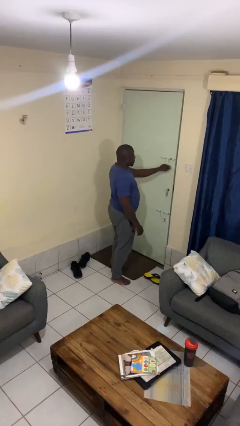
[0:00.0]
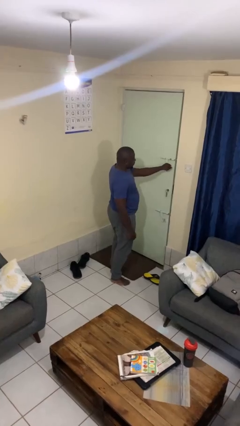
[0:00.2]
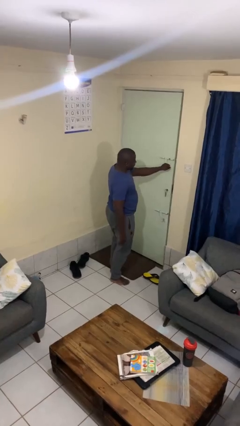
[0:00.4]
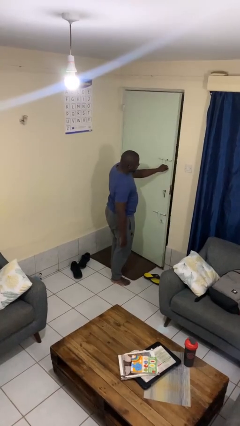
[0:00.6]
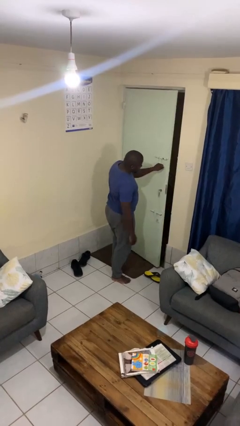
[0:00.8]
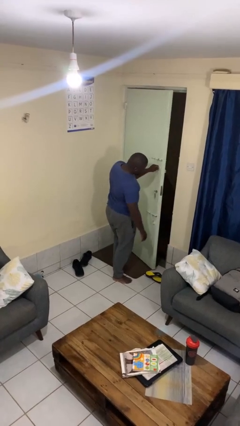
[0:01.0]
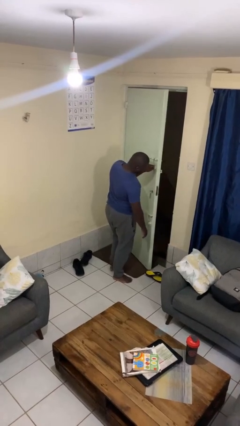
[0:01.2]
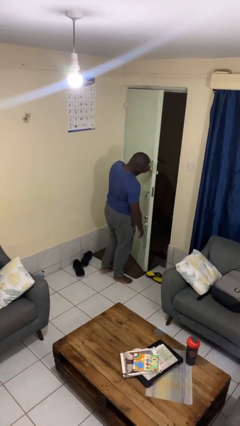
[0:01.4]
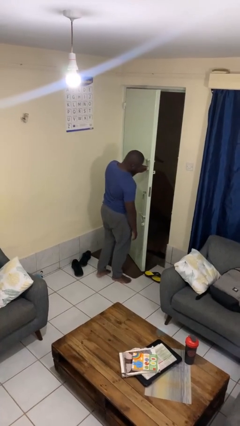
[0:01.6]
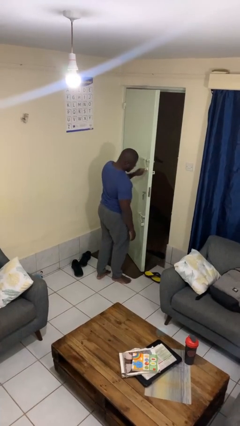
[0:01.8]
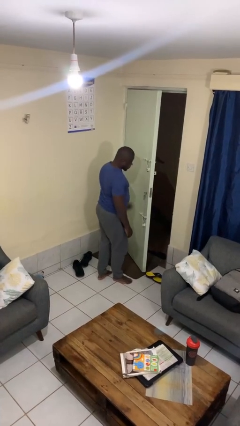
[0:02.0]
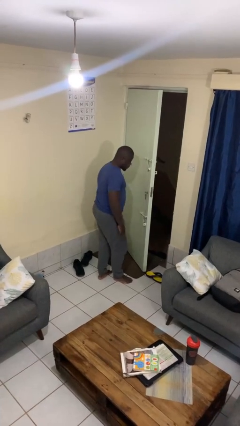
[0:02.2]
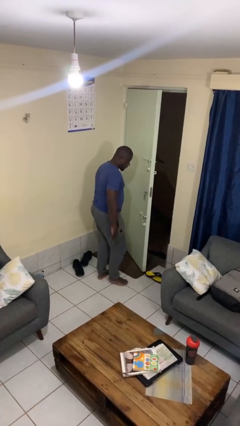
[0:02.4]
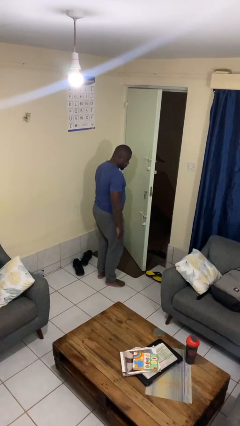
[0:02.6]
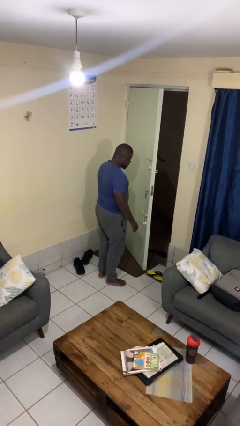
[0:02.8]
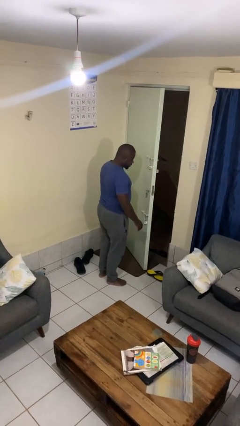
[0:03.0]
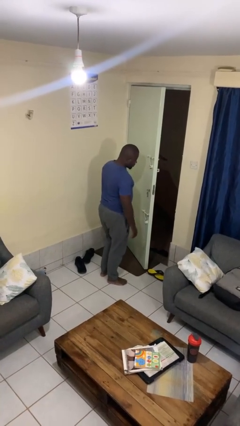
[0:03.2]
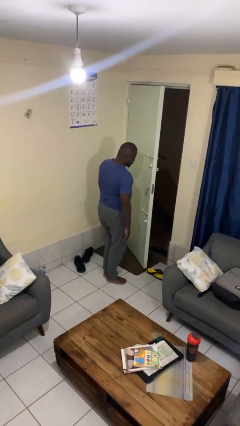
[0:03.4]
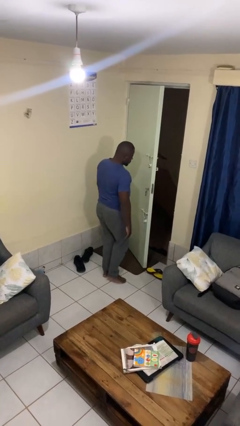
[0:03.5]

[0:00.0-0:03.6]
person opens facility door

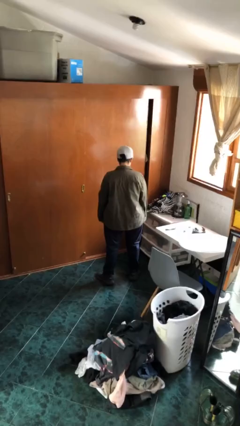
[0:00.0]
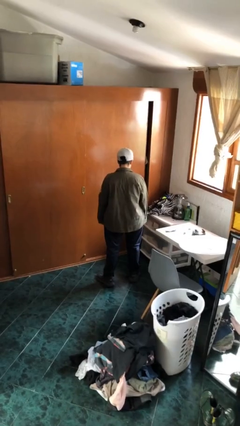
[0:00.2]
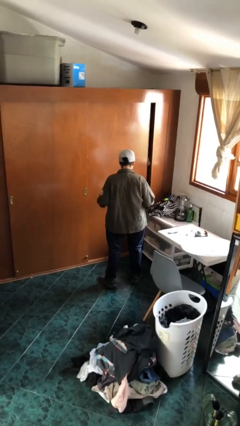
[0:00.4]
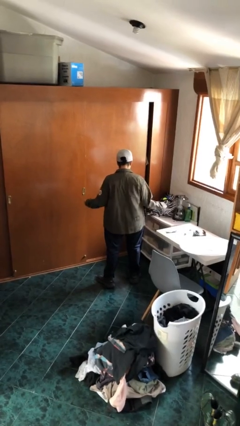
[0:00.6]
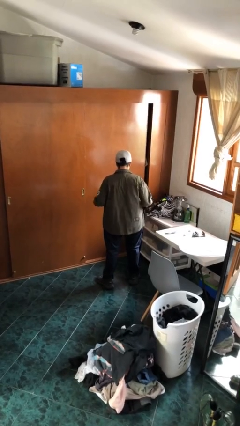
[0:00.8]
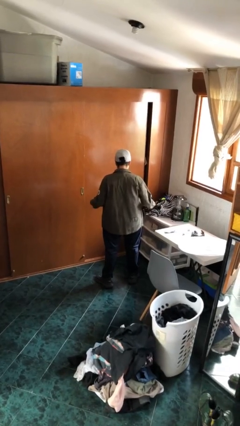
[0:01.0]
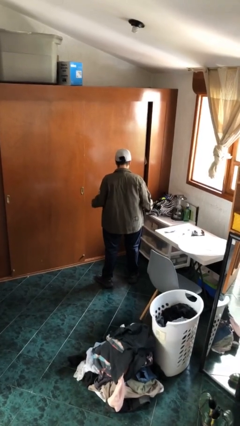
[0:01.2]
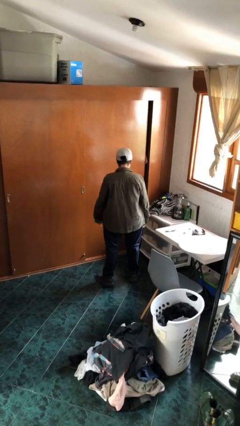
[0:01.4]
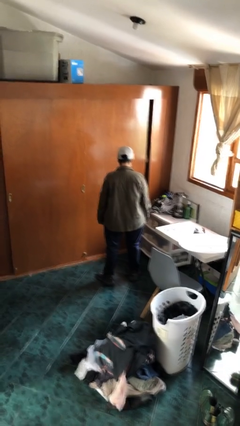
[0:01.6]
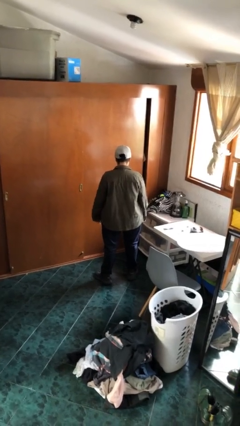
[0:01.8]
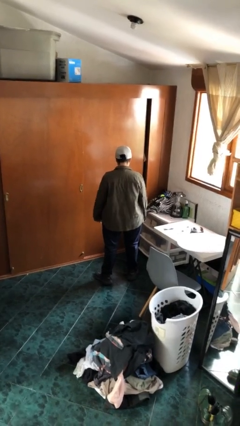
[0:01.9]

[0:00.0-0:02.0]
person snaps fingers

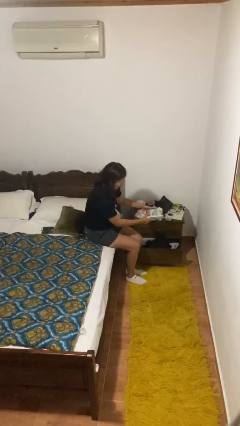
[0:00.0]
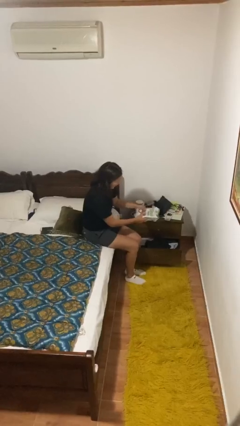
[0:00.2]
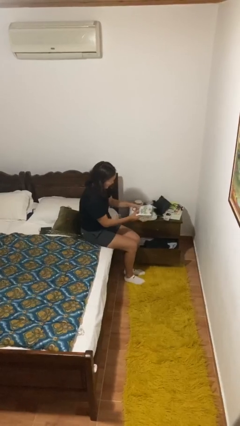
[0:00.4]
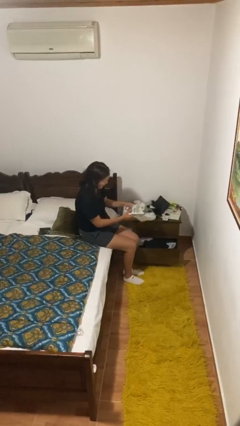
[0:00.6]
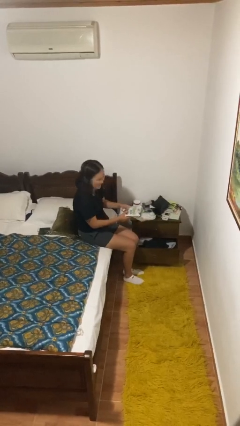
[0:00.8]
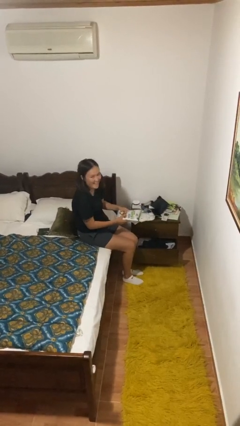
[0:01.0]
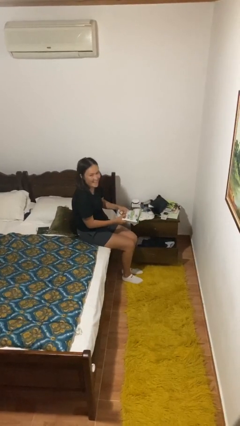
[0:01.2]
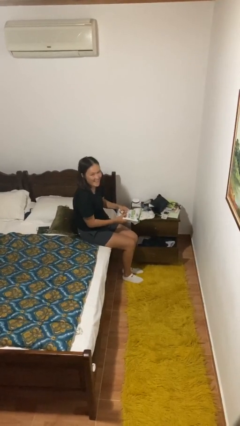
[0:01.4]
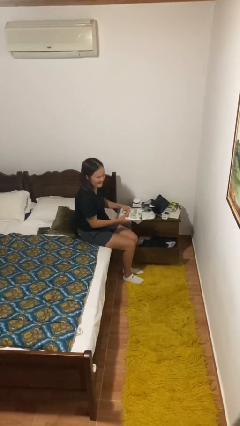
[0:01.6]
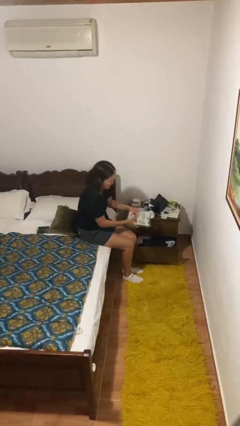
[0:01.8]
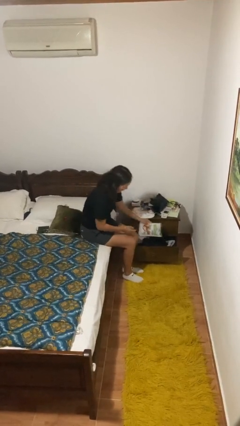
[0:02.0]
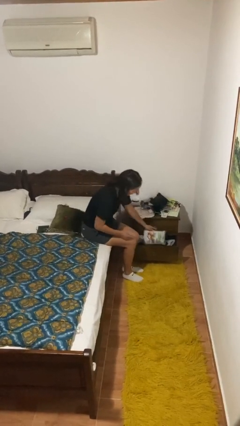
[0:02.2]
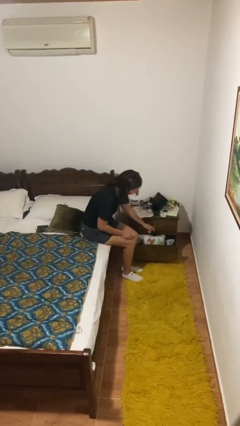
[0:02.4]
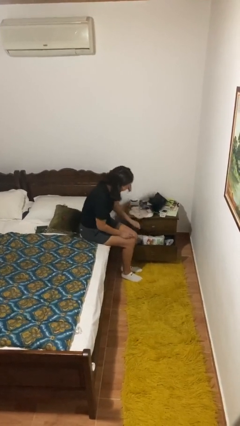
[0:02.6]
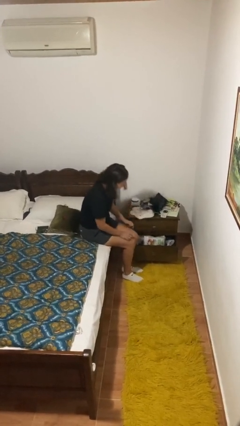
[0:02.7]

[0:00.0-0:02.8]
person puts down object into cabinet

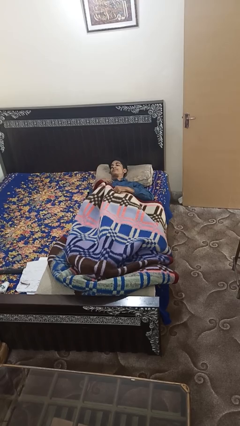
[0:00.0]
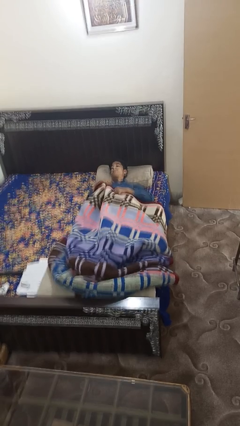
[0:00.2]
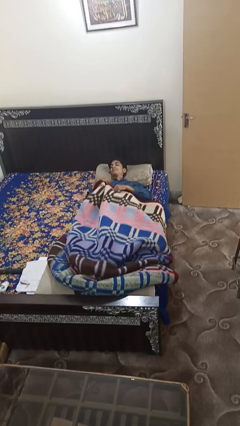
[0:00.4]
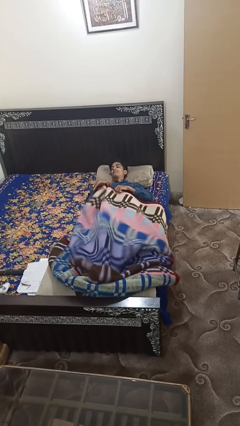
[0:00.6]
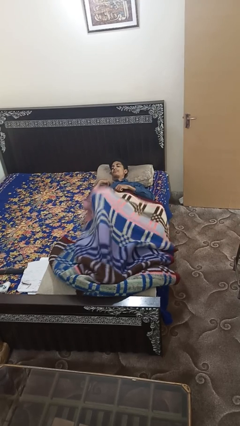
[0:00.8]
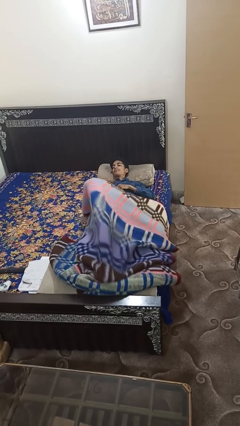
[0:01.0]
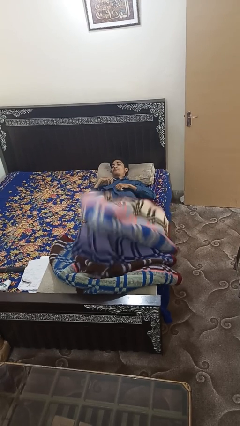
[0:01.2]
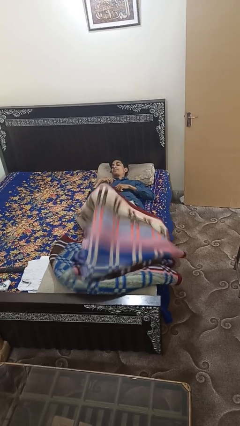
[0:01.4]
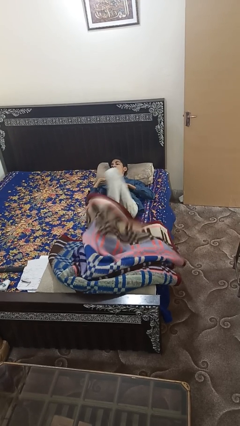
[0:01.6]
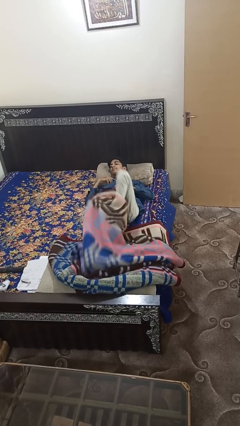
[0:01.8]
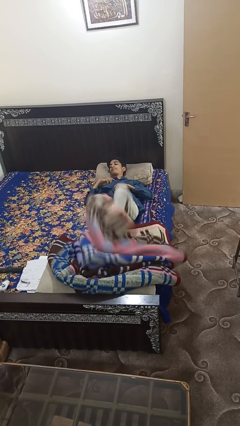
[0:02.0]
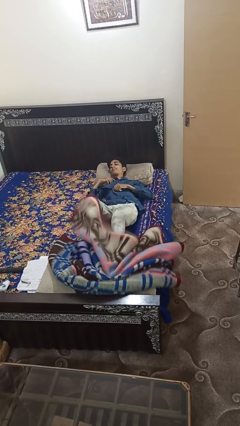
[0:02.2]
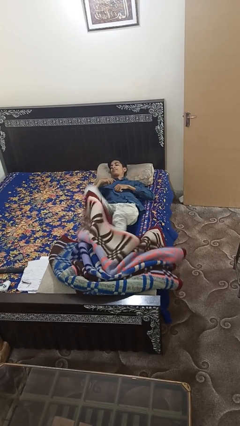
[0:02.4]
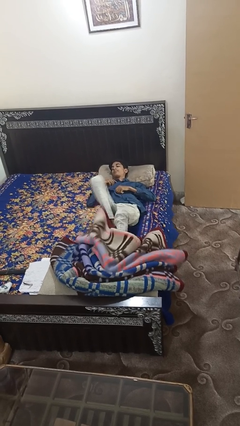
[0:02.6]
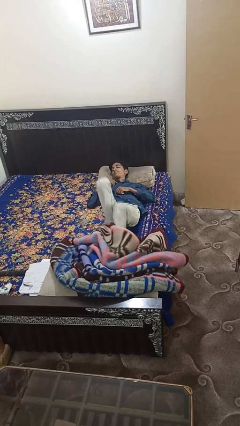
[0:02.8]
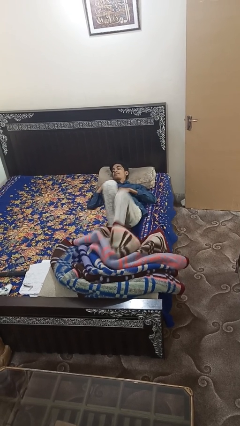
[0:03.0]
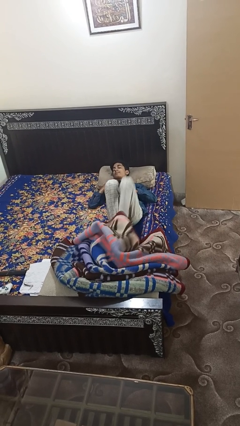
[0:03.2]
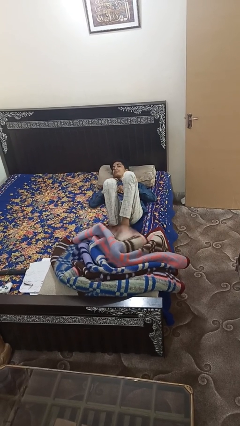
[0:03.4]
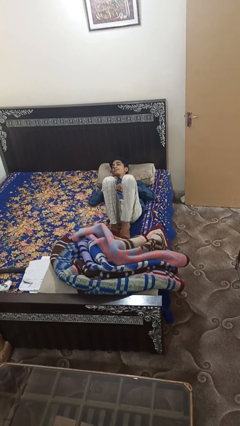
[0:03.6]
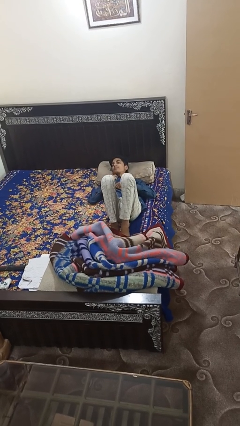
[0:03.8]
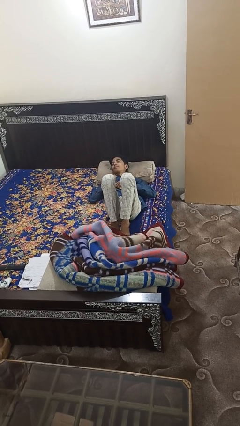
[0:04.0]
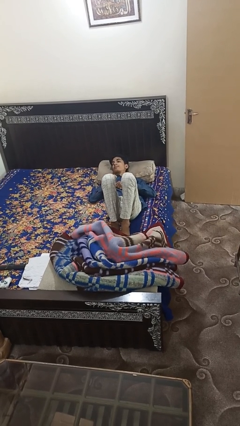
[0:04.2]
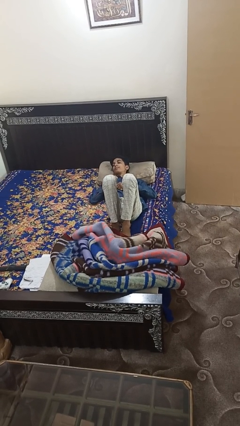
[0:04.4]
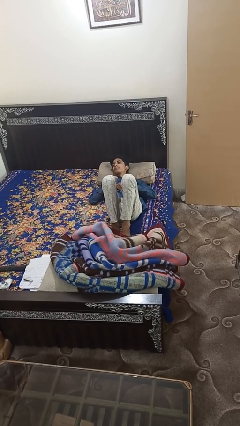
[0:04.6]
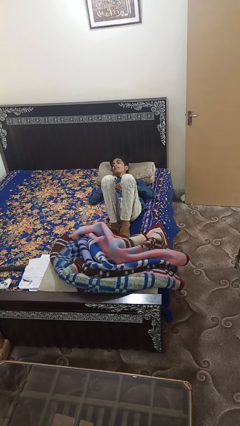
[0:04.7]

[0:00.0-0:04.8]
person uncovers with bedsheets

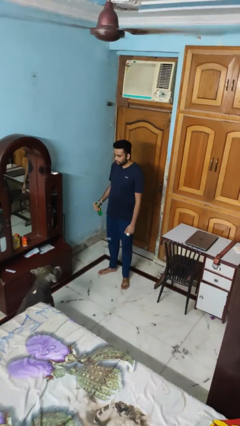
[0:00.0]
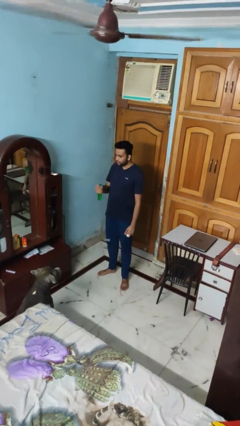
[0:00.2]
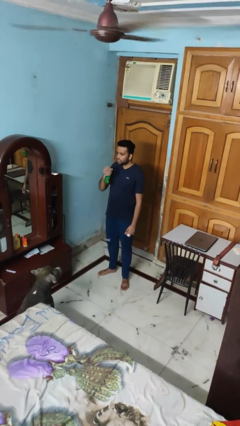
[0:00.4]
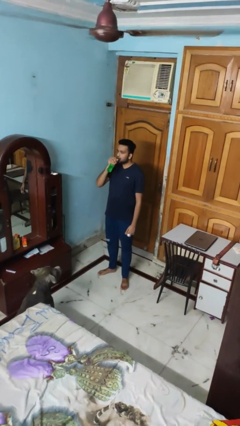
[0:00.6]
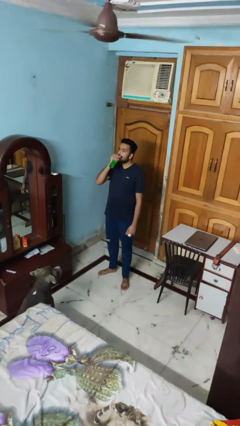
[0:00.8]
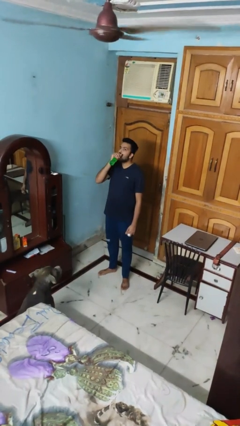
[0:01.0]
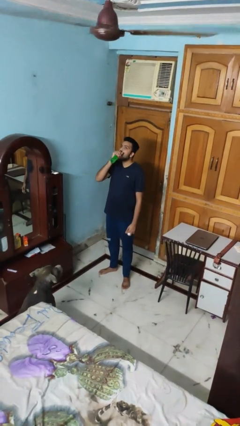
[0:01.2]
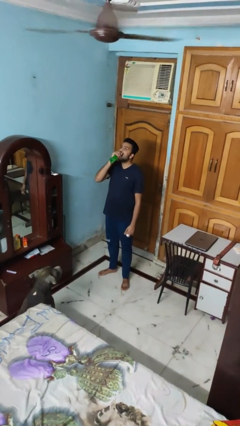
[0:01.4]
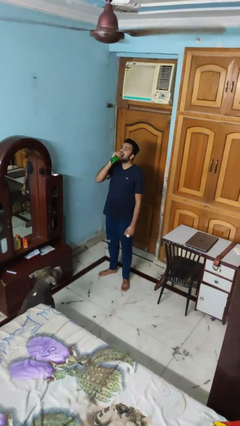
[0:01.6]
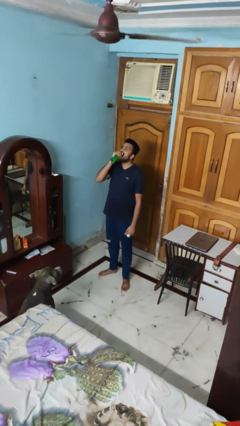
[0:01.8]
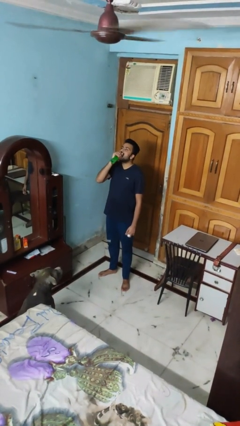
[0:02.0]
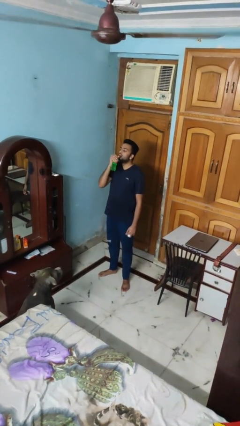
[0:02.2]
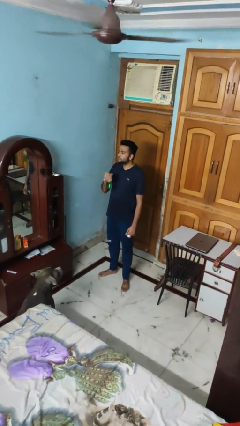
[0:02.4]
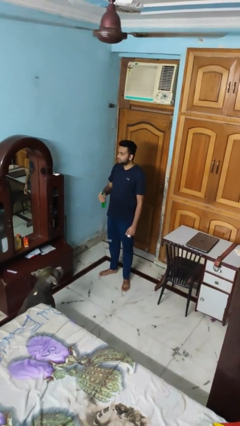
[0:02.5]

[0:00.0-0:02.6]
person drinks from bottle

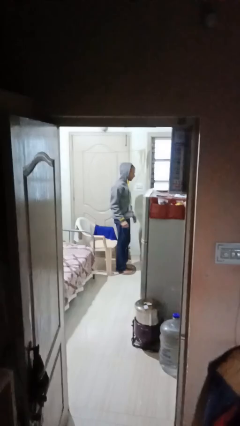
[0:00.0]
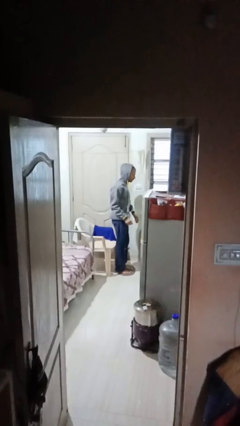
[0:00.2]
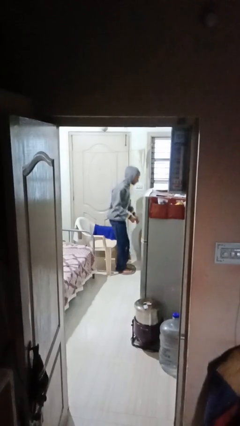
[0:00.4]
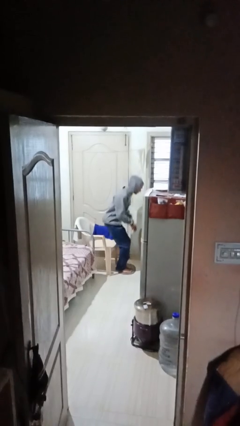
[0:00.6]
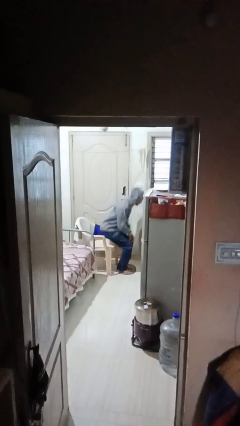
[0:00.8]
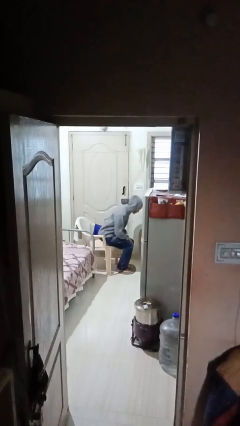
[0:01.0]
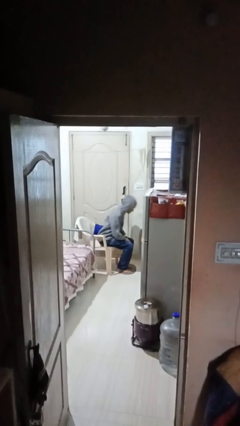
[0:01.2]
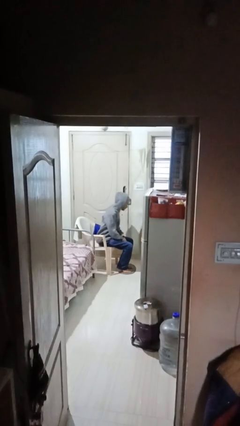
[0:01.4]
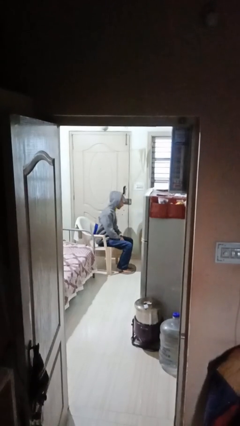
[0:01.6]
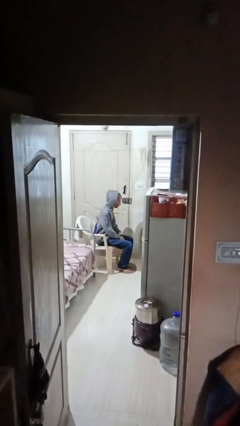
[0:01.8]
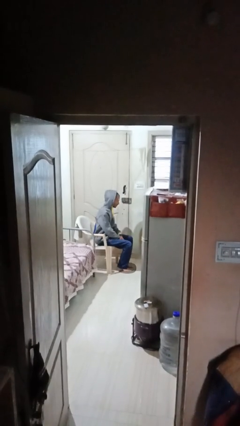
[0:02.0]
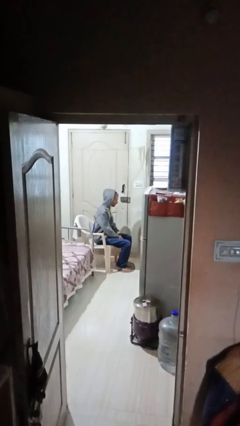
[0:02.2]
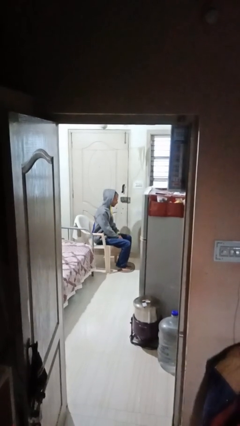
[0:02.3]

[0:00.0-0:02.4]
person sits down
